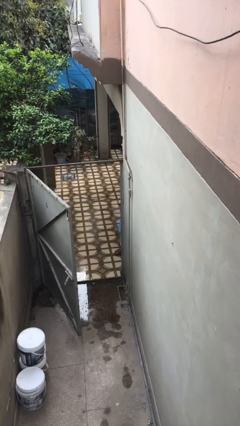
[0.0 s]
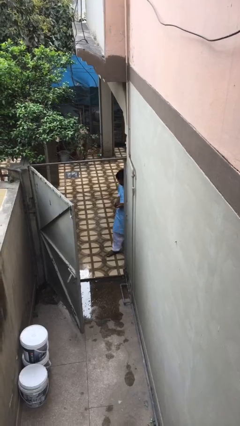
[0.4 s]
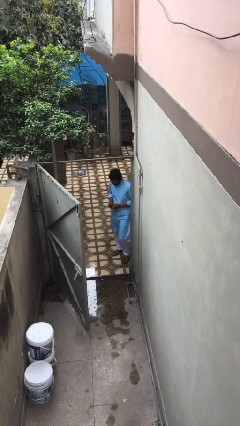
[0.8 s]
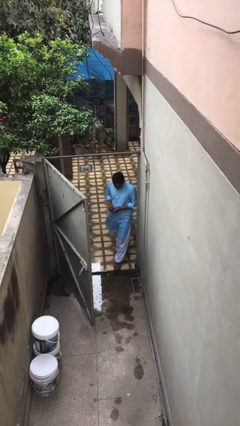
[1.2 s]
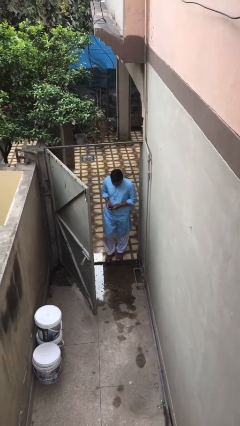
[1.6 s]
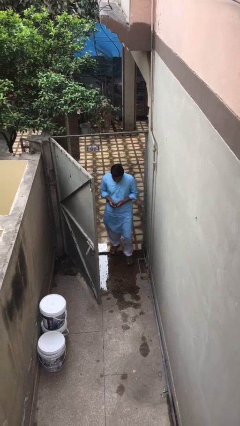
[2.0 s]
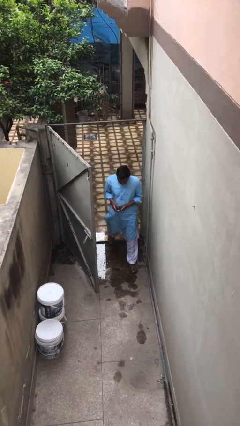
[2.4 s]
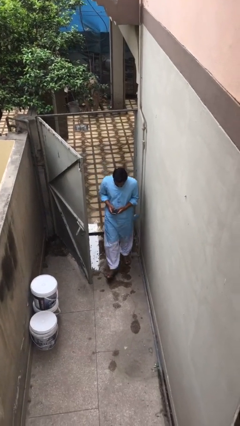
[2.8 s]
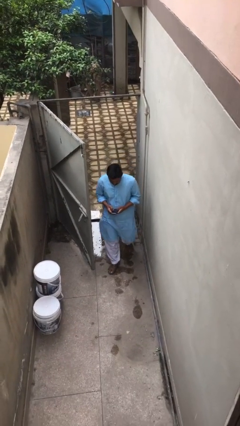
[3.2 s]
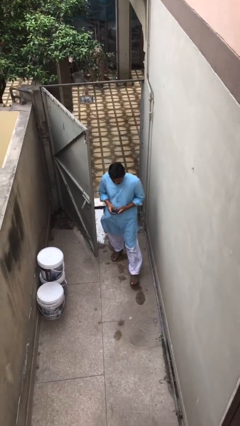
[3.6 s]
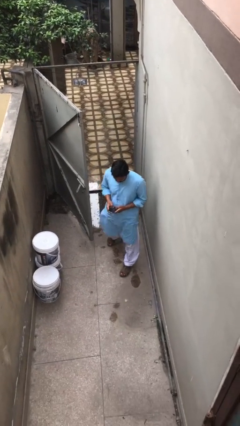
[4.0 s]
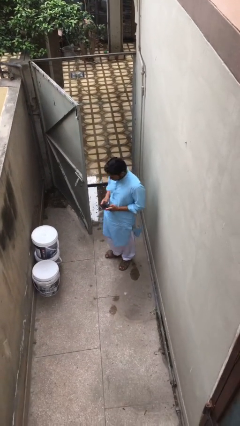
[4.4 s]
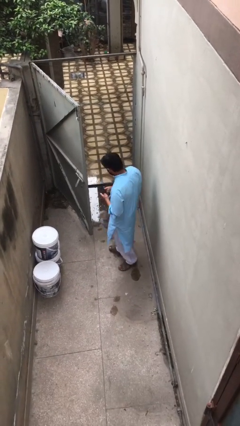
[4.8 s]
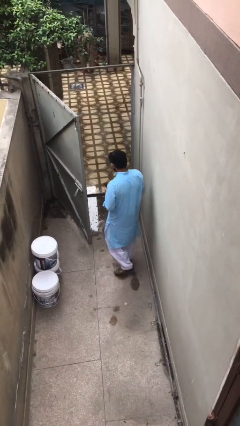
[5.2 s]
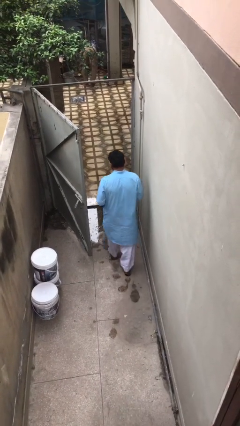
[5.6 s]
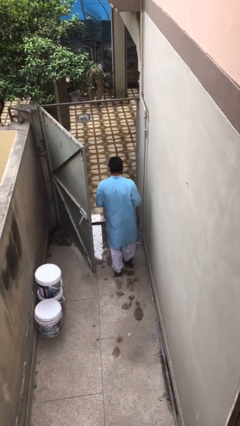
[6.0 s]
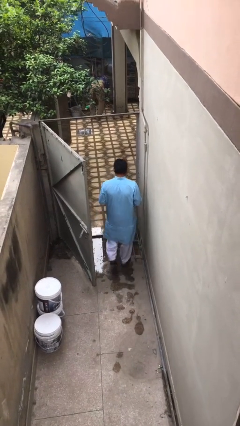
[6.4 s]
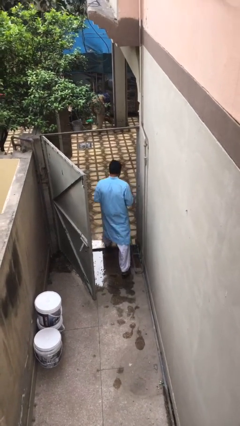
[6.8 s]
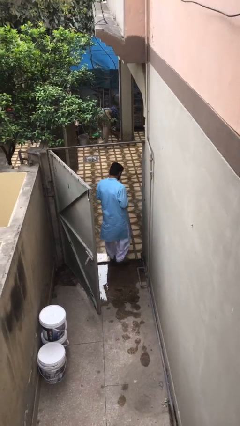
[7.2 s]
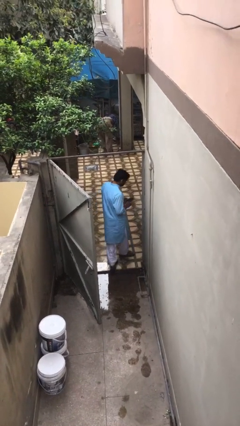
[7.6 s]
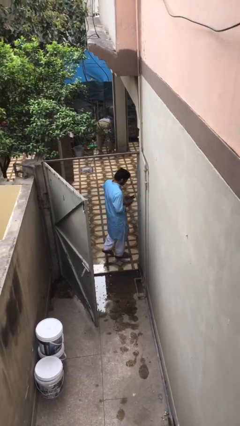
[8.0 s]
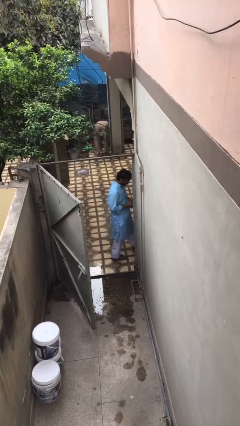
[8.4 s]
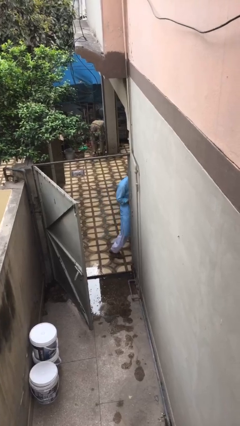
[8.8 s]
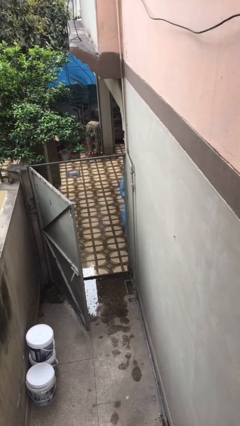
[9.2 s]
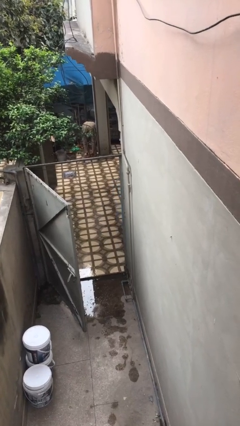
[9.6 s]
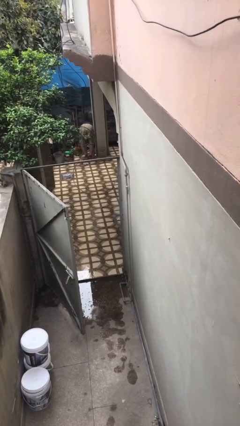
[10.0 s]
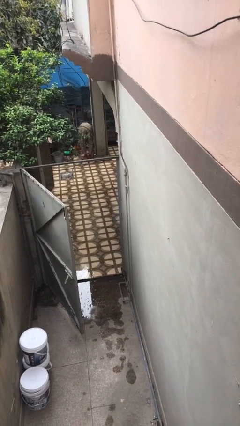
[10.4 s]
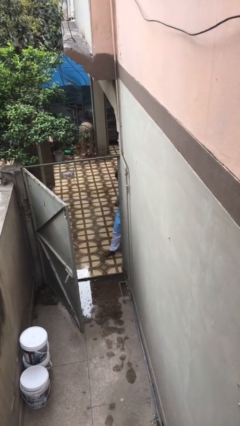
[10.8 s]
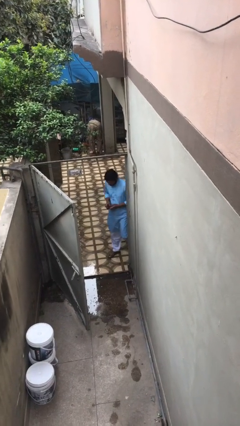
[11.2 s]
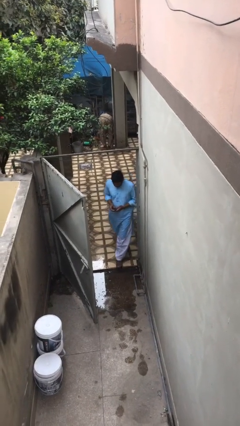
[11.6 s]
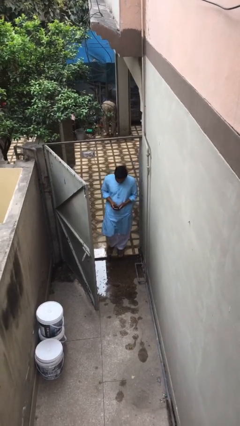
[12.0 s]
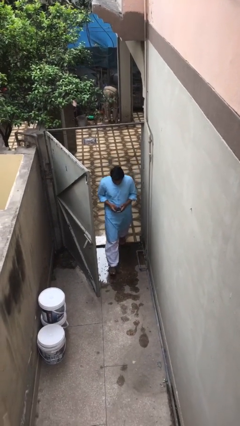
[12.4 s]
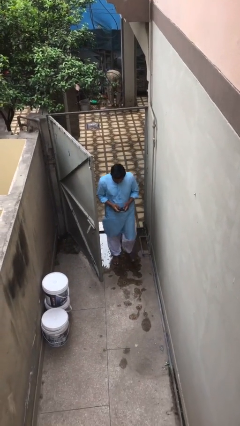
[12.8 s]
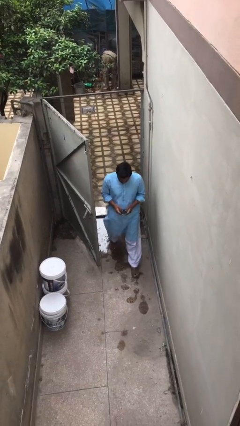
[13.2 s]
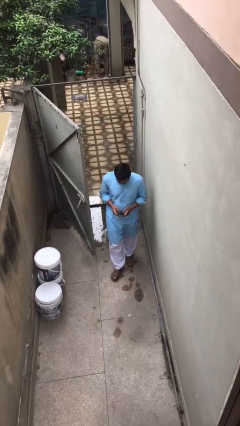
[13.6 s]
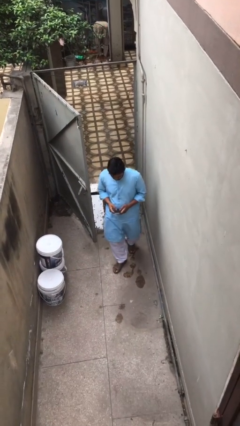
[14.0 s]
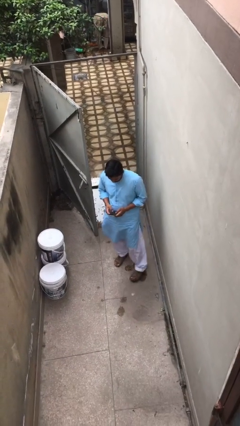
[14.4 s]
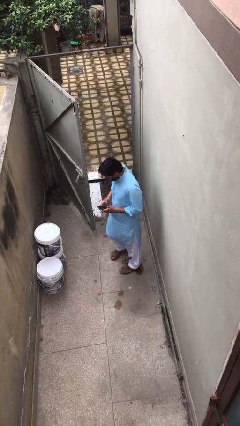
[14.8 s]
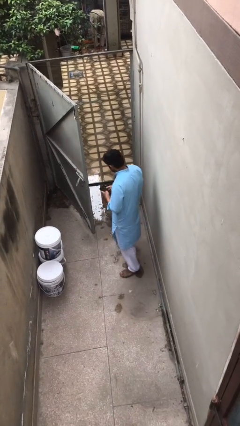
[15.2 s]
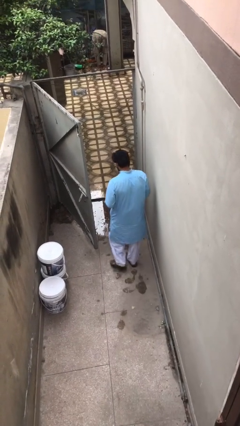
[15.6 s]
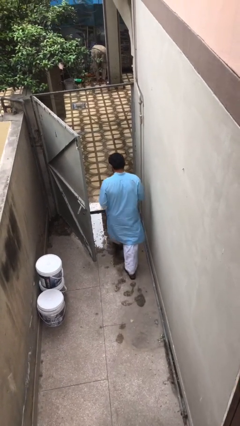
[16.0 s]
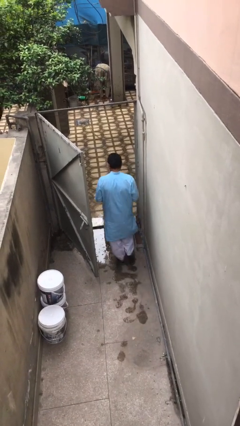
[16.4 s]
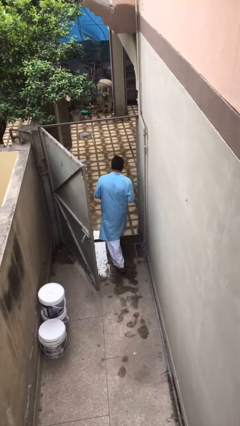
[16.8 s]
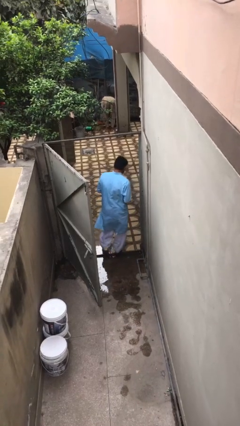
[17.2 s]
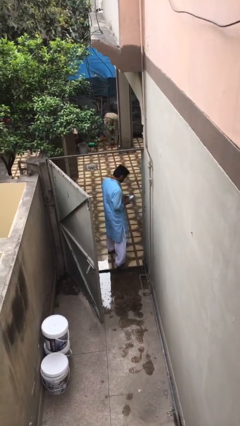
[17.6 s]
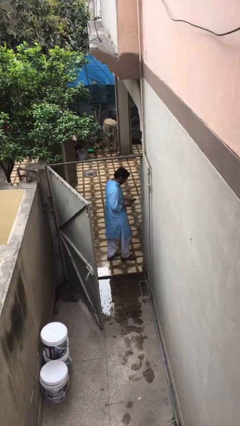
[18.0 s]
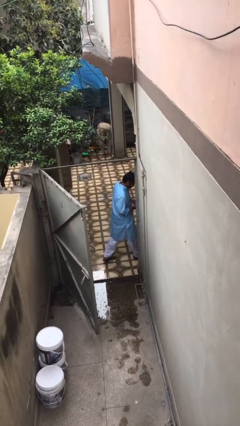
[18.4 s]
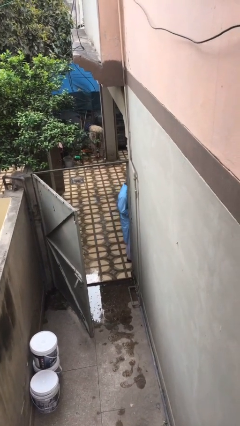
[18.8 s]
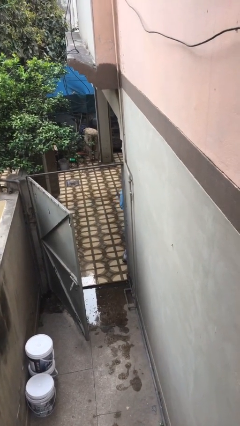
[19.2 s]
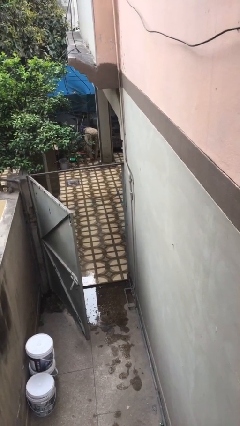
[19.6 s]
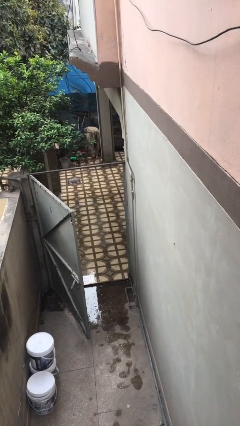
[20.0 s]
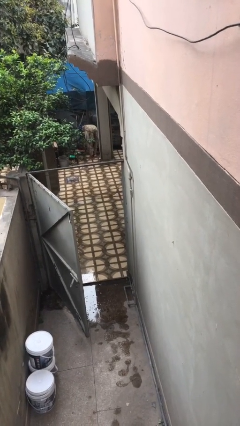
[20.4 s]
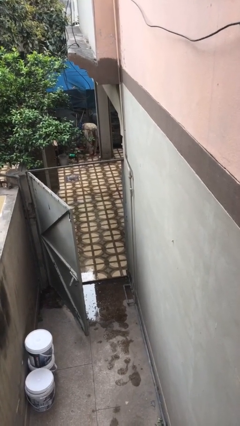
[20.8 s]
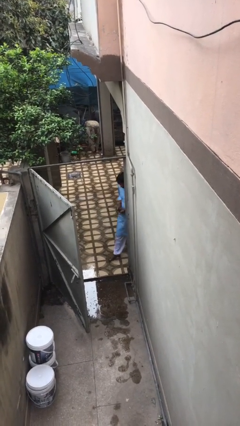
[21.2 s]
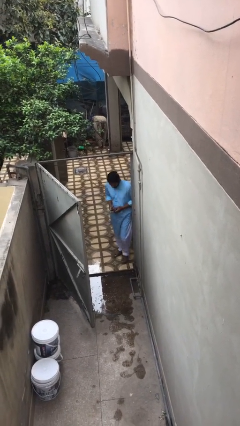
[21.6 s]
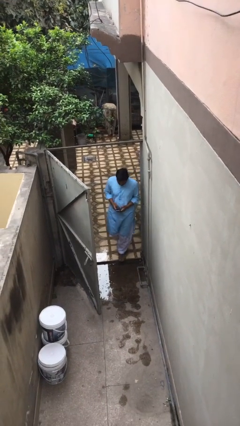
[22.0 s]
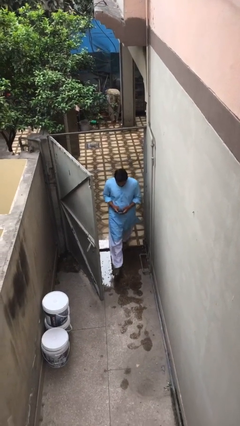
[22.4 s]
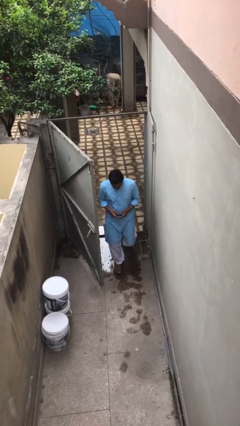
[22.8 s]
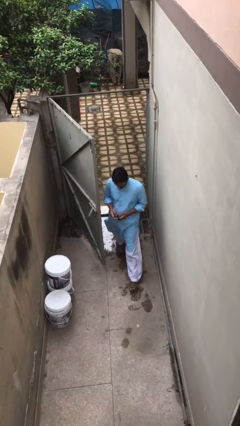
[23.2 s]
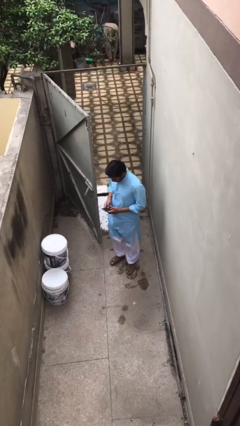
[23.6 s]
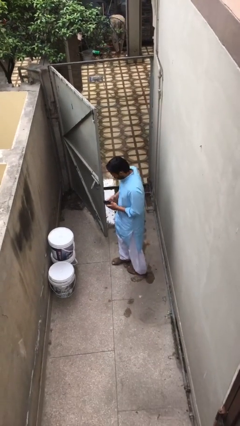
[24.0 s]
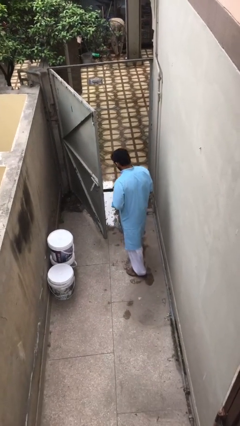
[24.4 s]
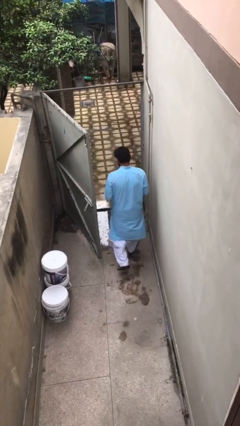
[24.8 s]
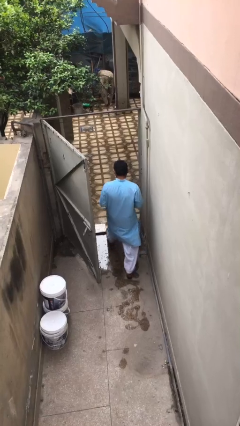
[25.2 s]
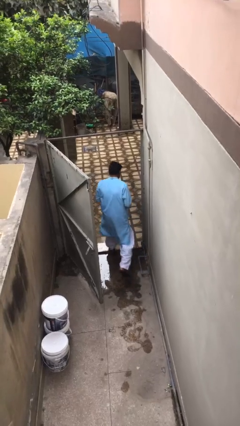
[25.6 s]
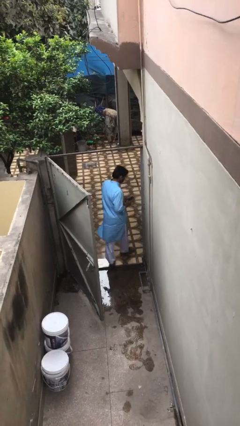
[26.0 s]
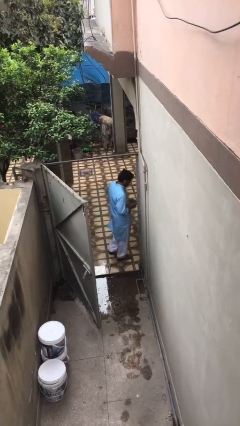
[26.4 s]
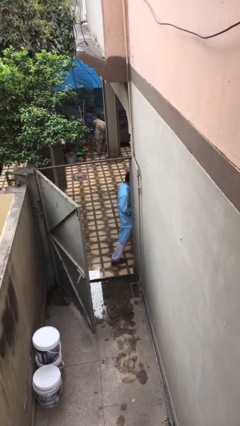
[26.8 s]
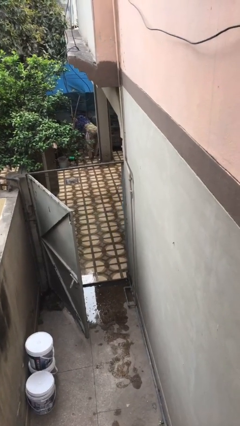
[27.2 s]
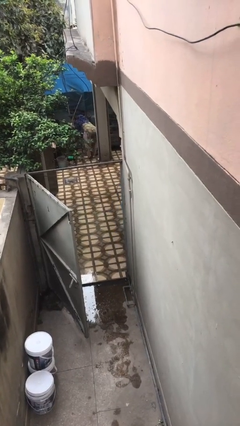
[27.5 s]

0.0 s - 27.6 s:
person texts on phone

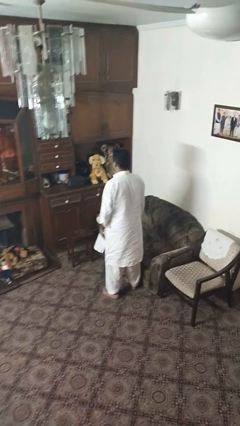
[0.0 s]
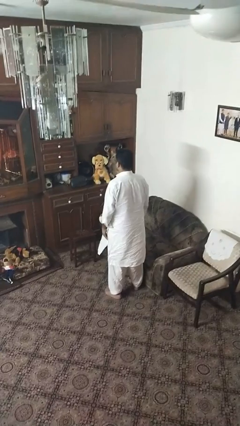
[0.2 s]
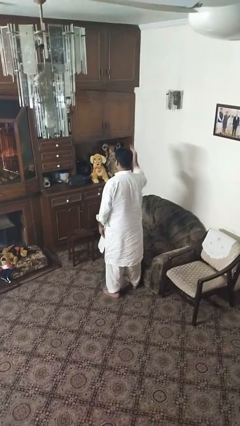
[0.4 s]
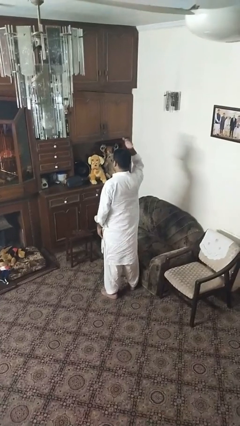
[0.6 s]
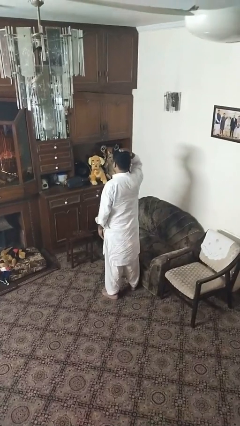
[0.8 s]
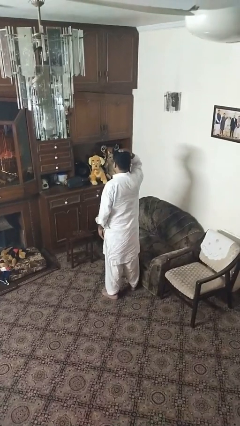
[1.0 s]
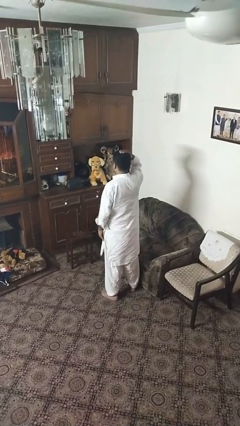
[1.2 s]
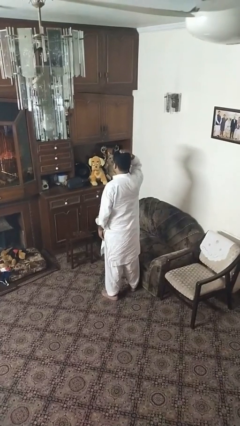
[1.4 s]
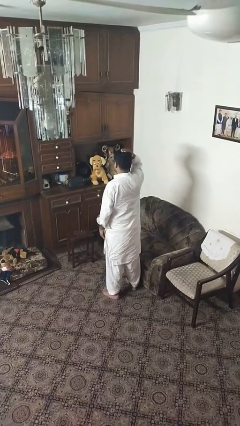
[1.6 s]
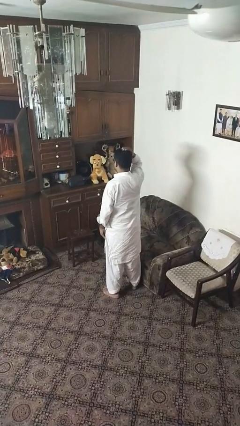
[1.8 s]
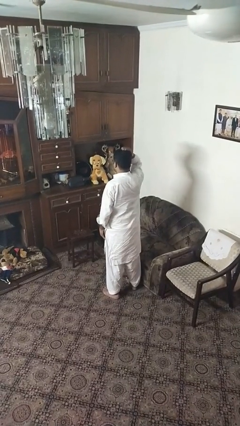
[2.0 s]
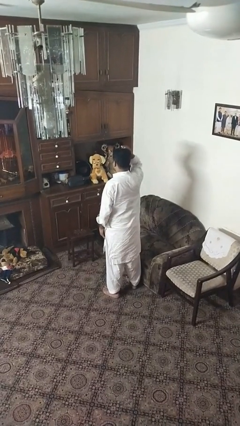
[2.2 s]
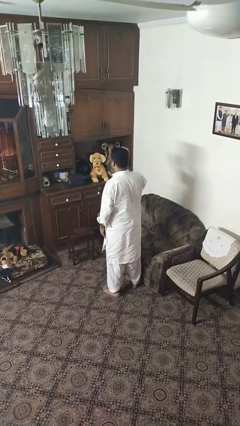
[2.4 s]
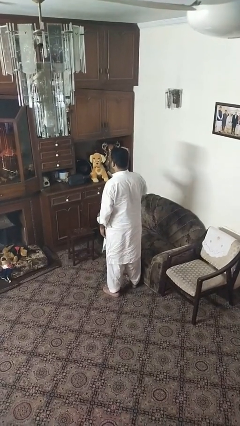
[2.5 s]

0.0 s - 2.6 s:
person pats head

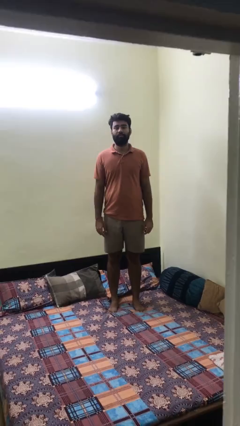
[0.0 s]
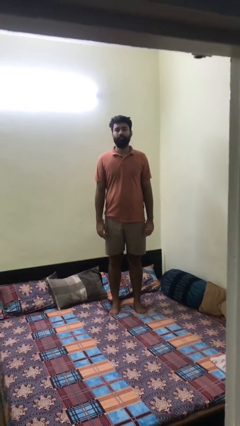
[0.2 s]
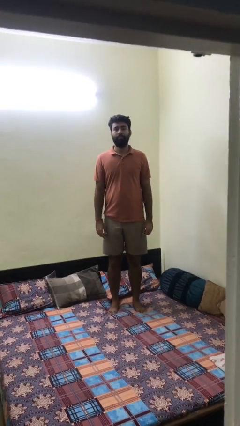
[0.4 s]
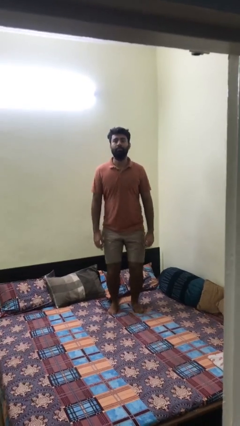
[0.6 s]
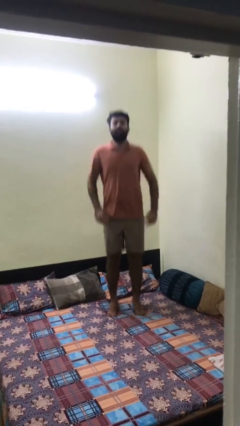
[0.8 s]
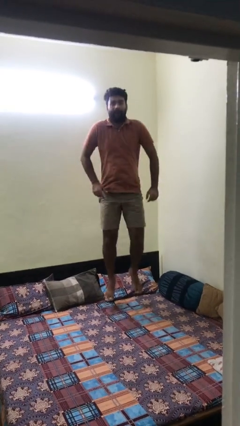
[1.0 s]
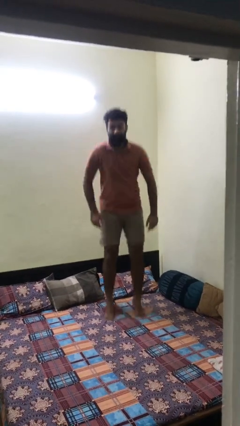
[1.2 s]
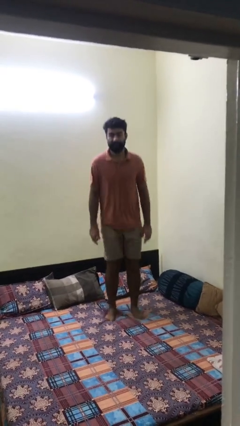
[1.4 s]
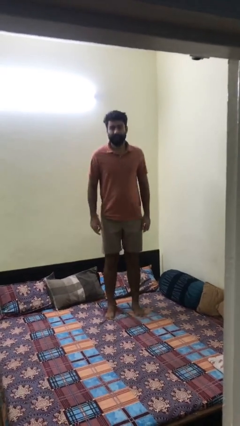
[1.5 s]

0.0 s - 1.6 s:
person jumps on bed

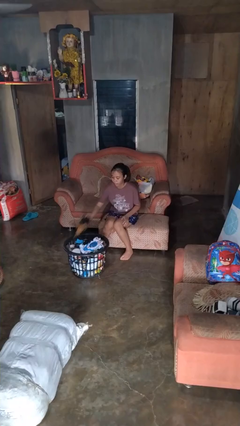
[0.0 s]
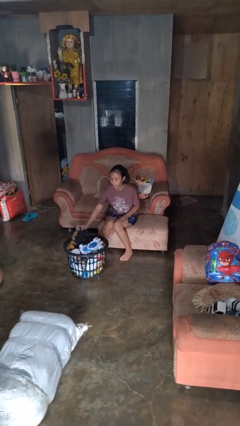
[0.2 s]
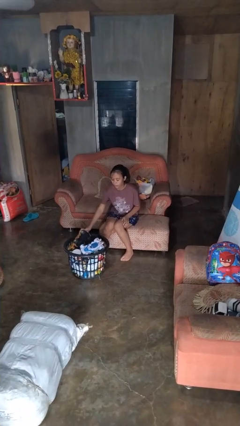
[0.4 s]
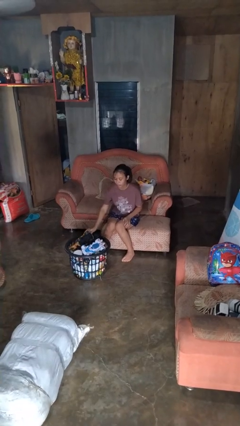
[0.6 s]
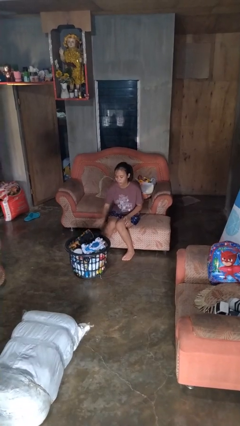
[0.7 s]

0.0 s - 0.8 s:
person puts object into basket
